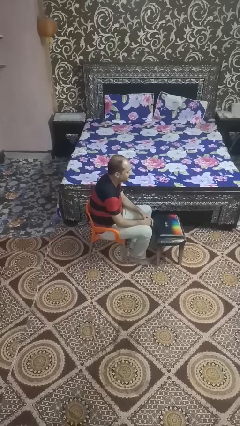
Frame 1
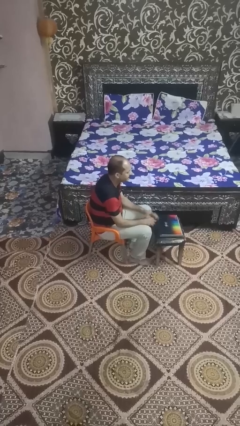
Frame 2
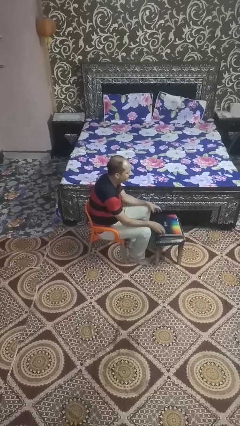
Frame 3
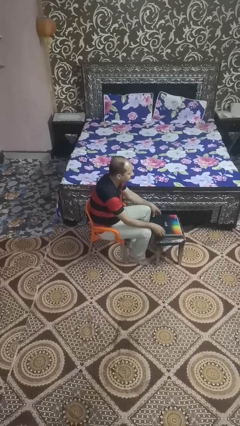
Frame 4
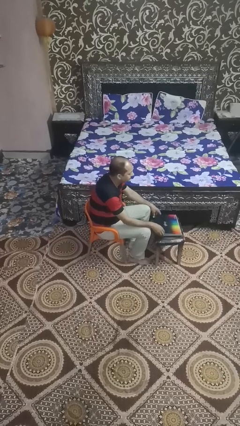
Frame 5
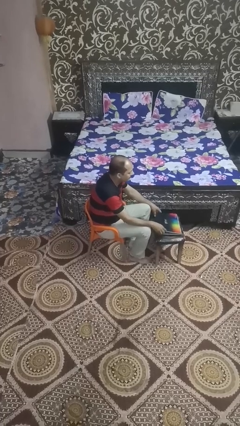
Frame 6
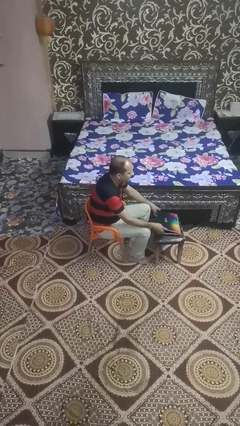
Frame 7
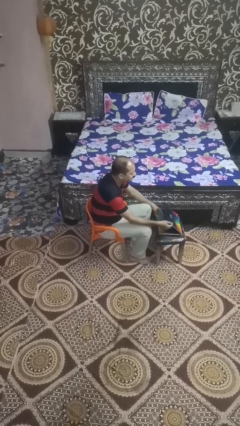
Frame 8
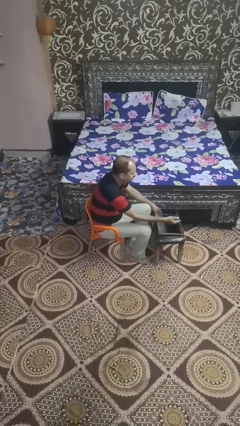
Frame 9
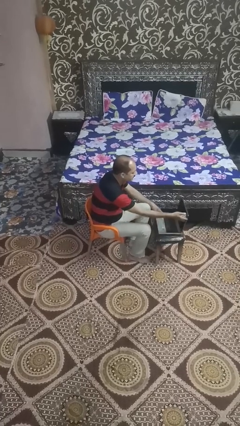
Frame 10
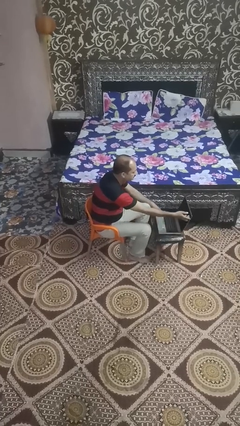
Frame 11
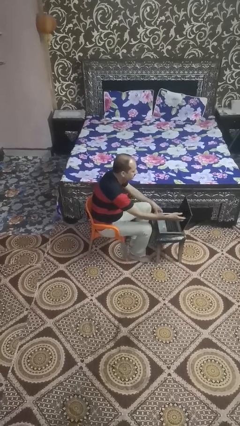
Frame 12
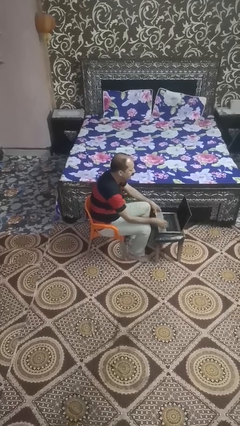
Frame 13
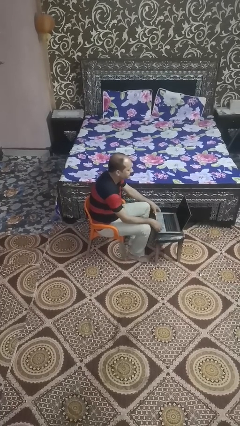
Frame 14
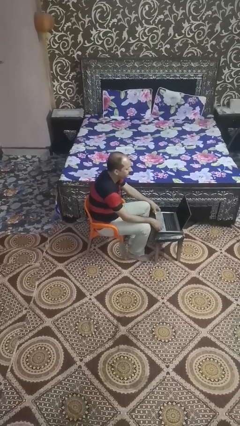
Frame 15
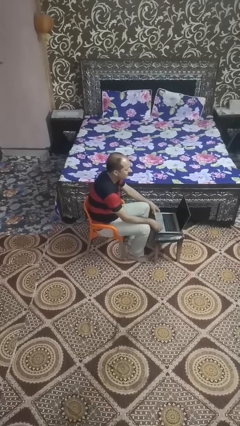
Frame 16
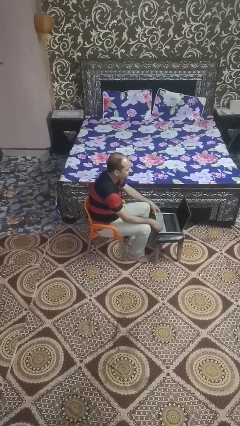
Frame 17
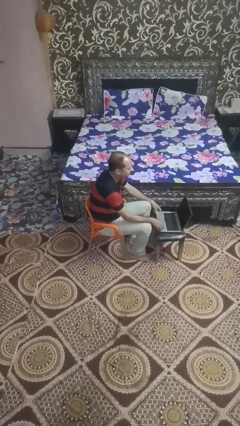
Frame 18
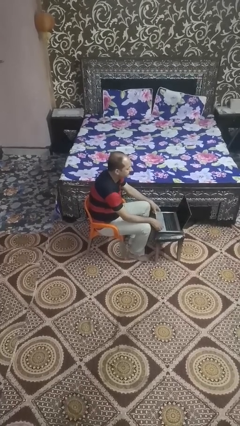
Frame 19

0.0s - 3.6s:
person opens laptop

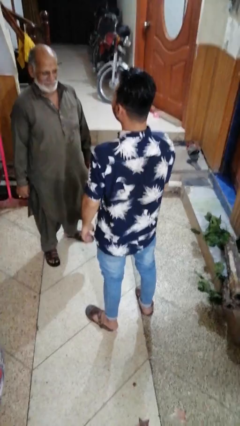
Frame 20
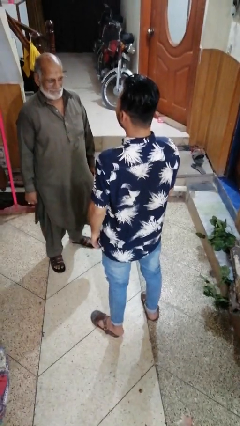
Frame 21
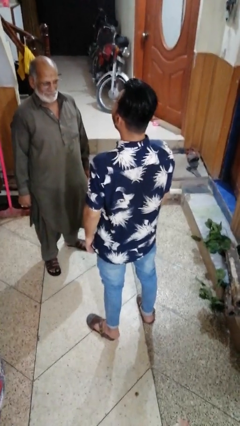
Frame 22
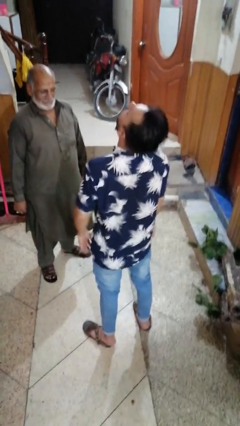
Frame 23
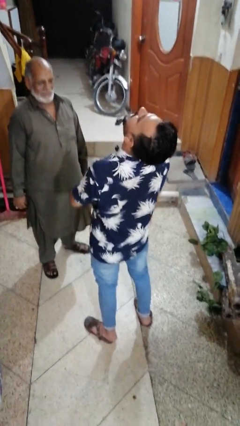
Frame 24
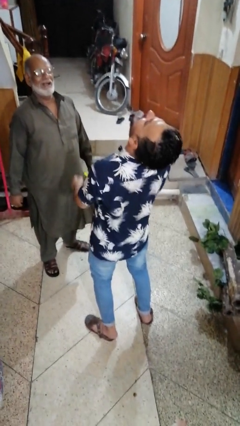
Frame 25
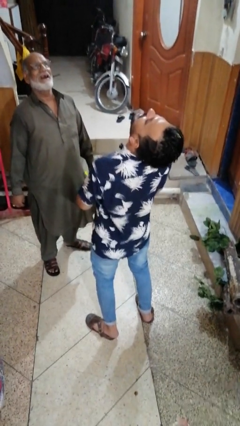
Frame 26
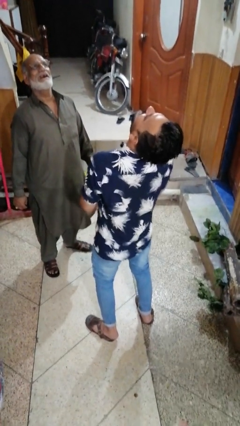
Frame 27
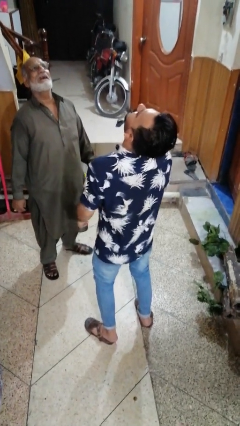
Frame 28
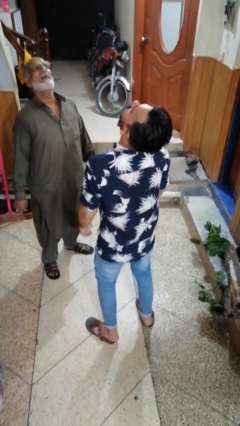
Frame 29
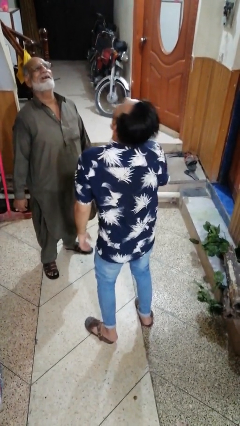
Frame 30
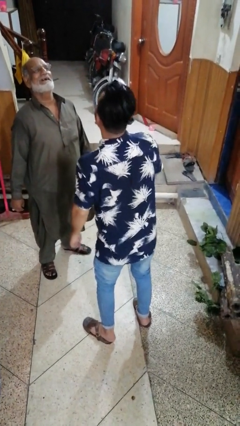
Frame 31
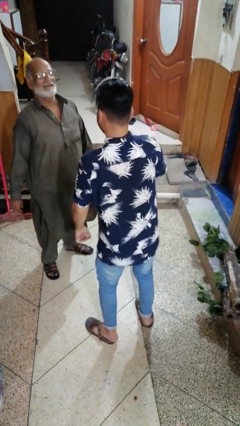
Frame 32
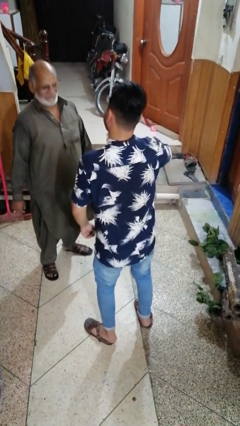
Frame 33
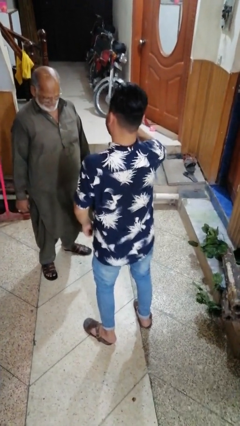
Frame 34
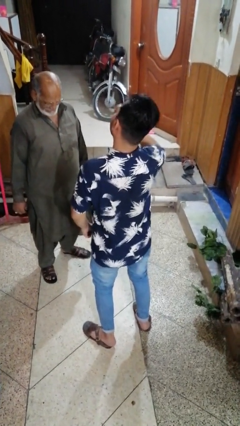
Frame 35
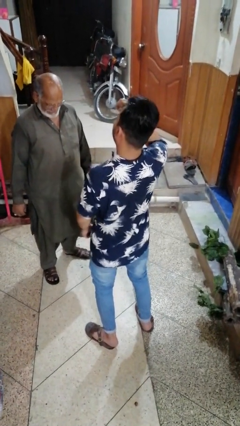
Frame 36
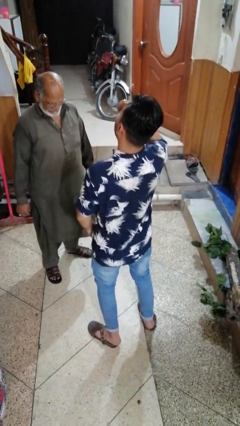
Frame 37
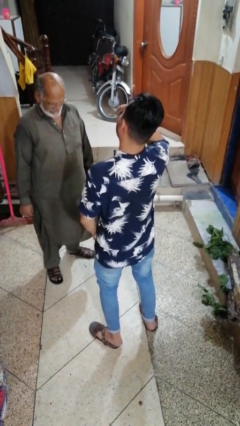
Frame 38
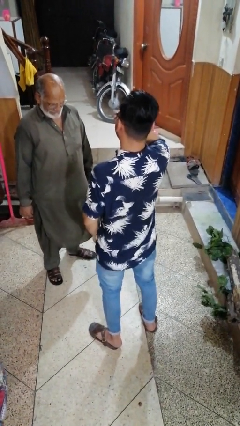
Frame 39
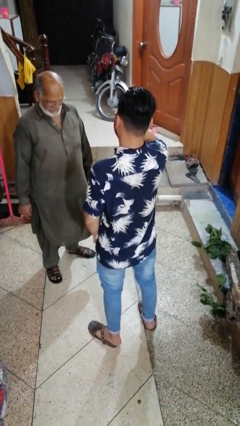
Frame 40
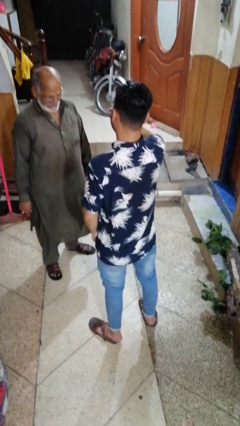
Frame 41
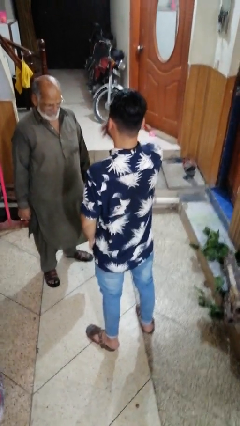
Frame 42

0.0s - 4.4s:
person laughs with person

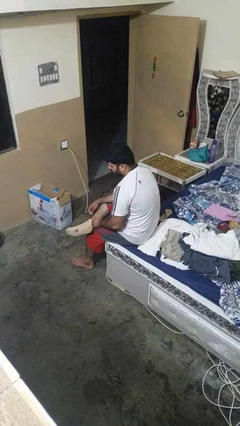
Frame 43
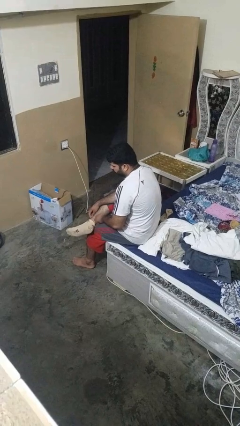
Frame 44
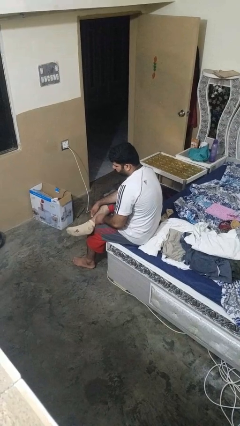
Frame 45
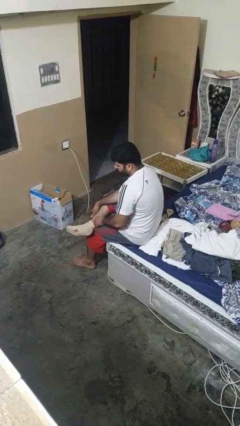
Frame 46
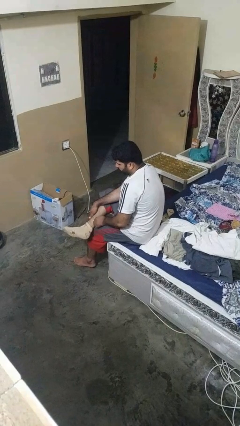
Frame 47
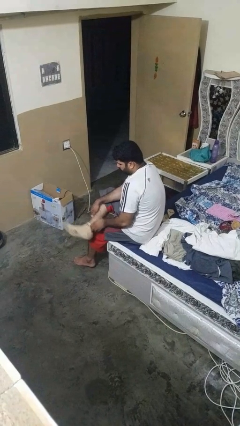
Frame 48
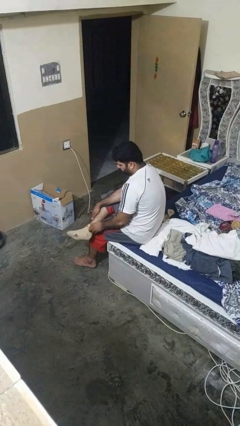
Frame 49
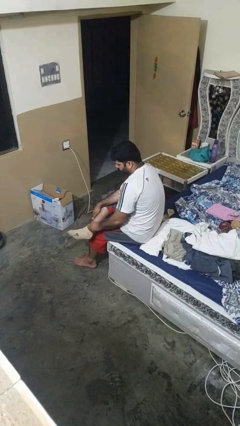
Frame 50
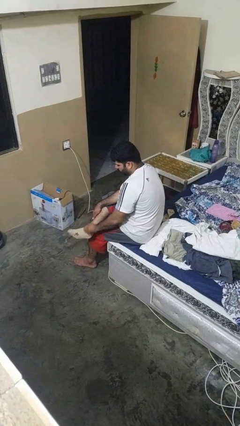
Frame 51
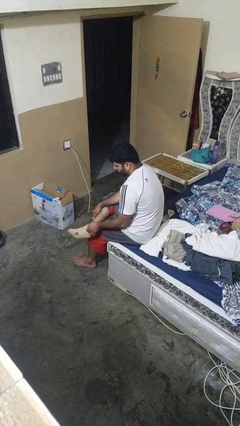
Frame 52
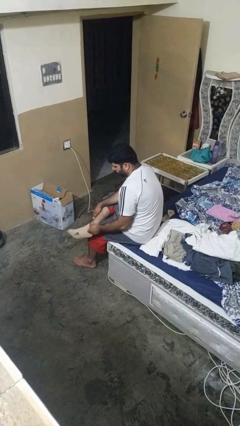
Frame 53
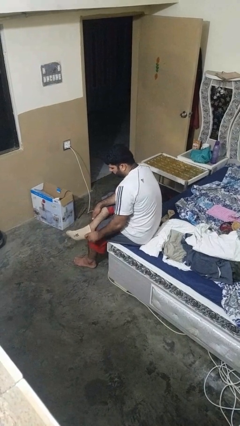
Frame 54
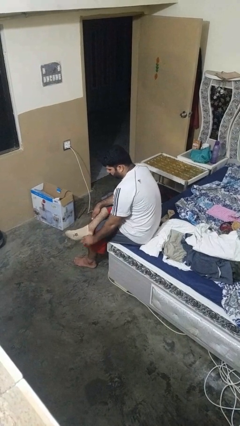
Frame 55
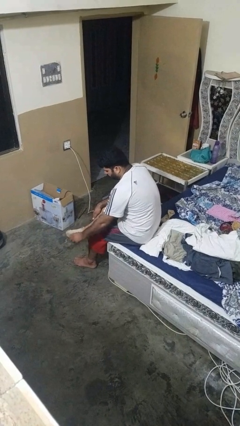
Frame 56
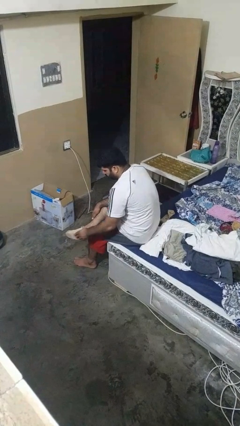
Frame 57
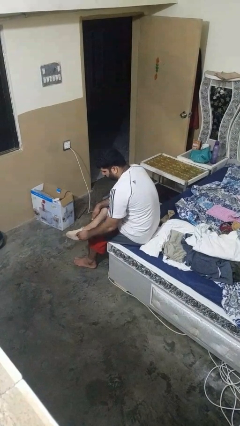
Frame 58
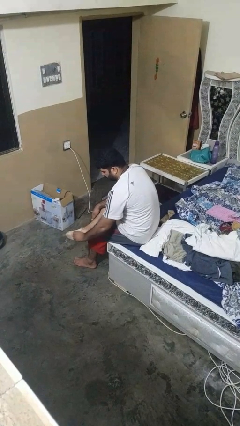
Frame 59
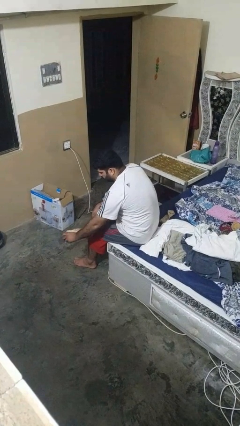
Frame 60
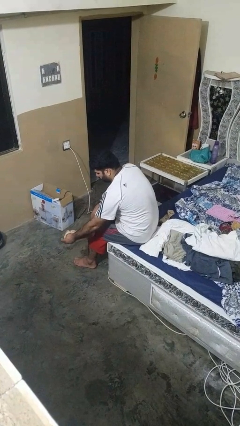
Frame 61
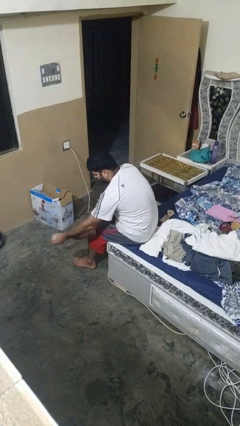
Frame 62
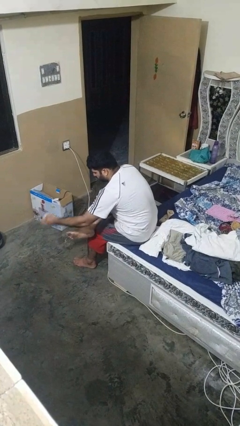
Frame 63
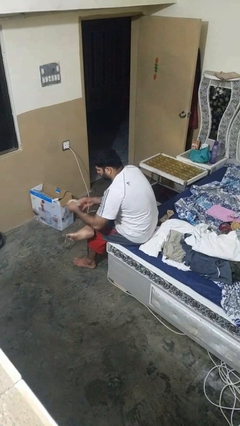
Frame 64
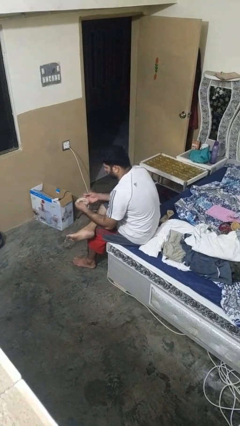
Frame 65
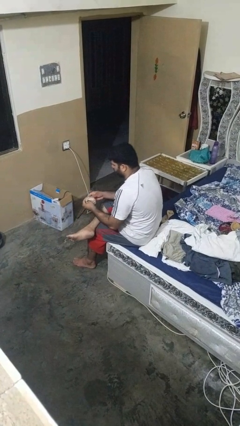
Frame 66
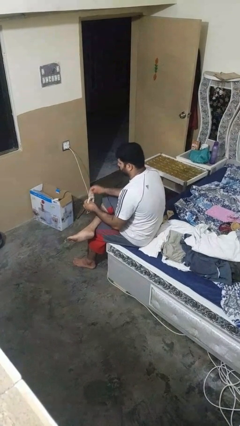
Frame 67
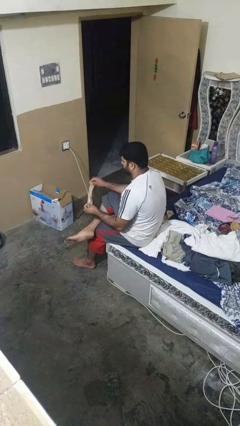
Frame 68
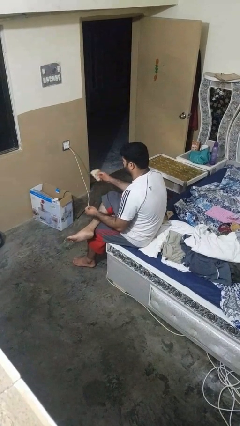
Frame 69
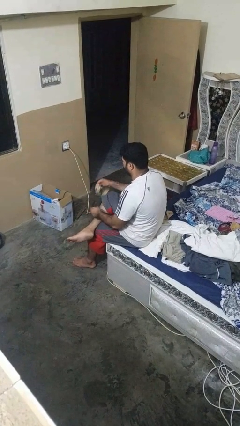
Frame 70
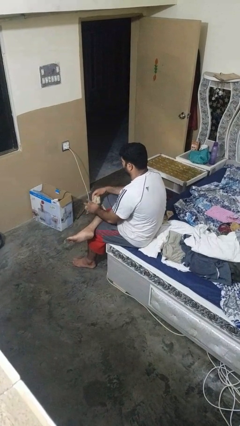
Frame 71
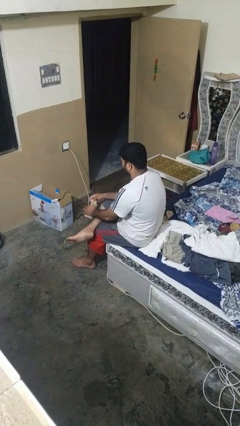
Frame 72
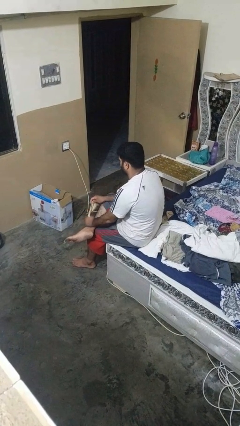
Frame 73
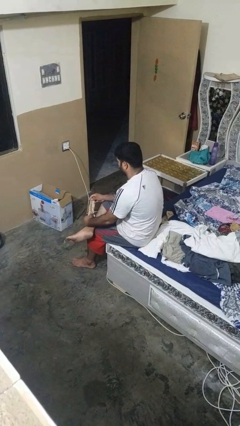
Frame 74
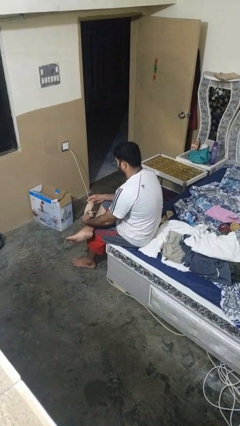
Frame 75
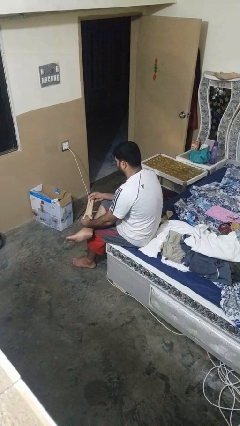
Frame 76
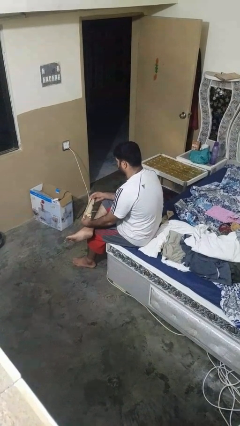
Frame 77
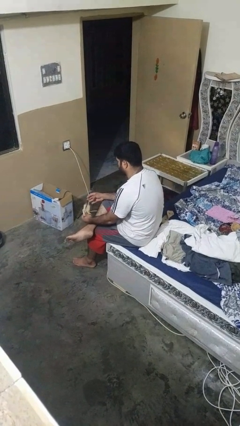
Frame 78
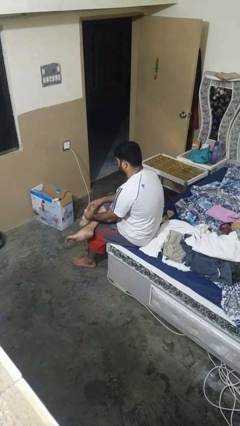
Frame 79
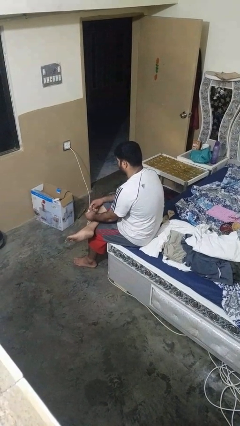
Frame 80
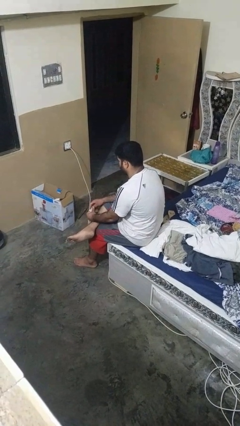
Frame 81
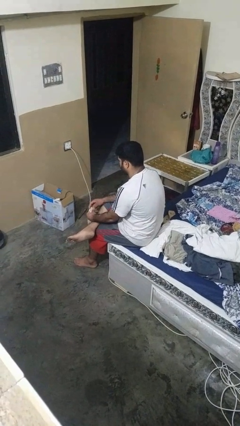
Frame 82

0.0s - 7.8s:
person takes off socks

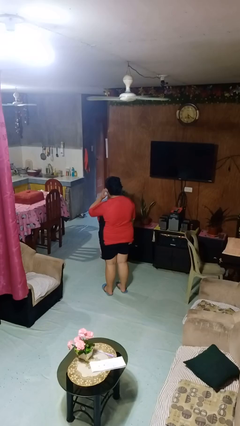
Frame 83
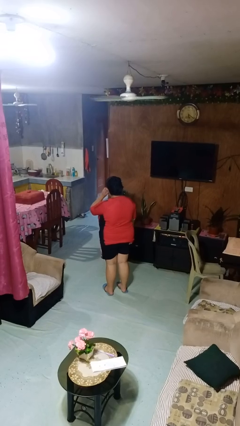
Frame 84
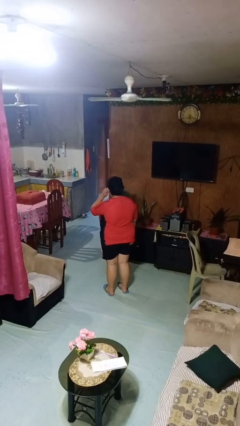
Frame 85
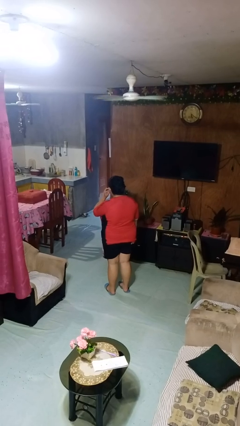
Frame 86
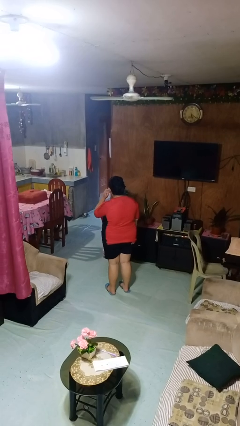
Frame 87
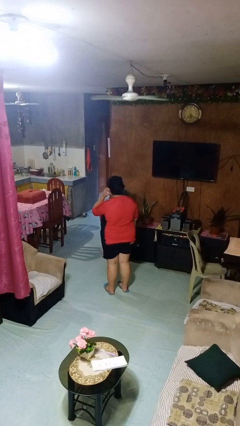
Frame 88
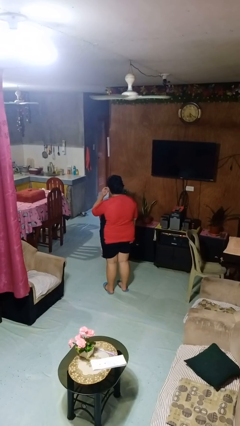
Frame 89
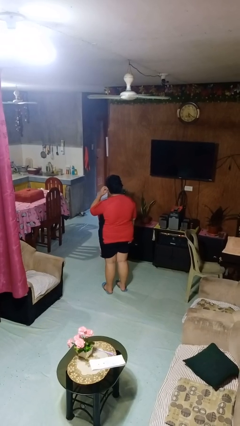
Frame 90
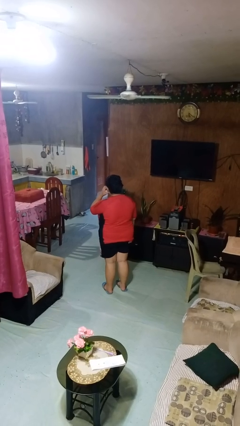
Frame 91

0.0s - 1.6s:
person touches earlobe

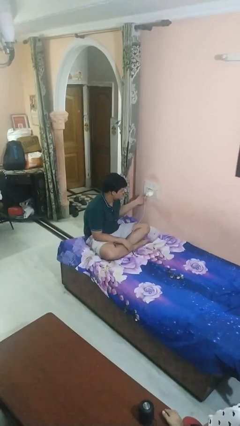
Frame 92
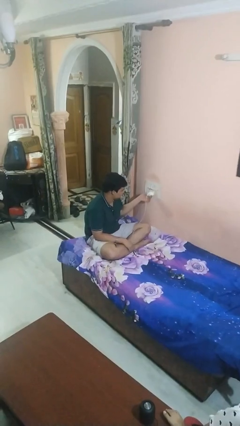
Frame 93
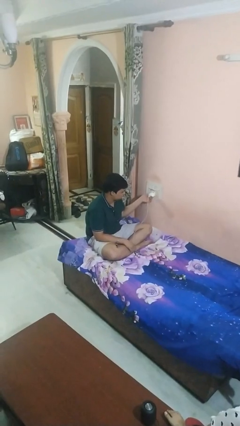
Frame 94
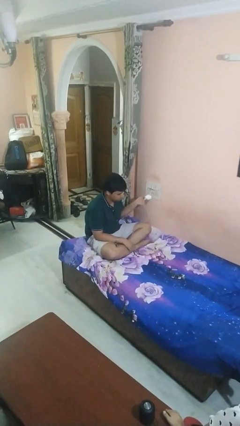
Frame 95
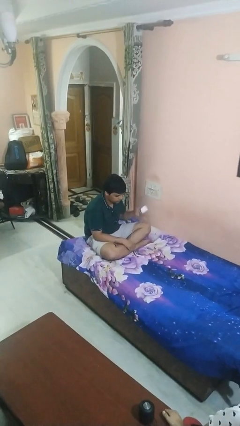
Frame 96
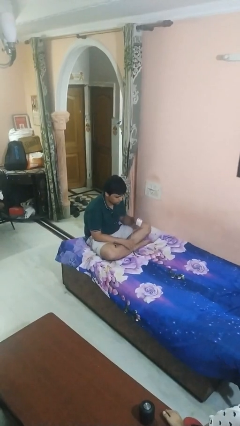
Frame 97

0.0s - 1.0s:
person unplugs from electrical socket
